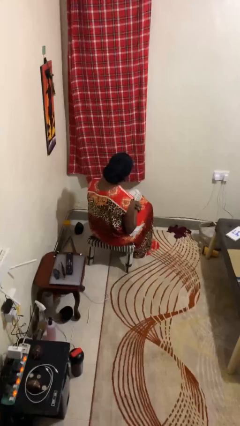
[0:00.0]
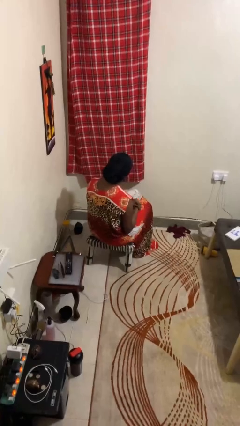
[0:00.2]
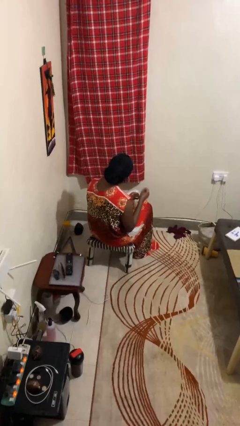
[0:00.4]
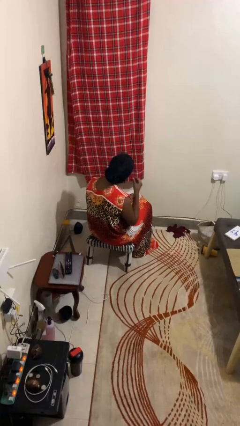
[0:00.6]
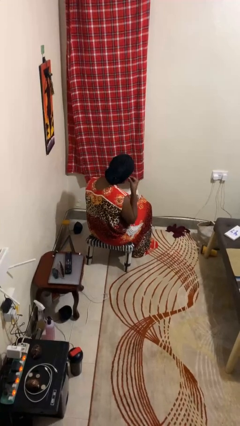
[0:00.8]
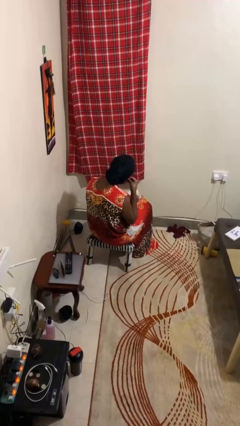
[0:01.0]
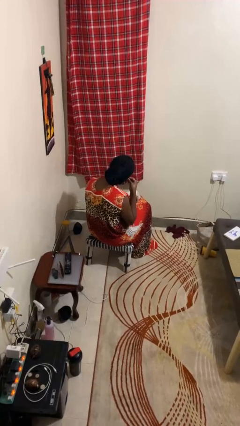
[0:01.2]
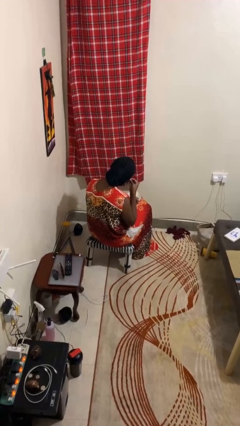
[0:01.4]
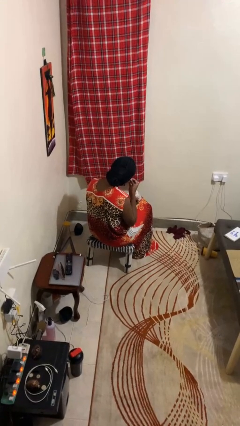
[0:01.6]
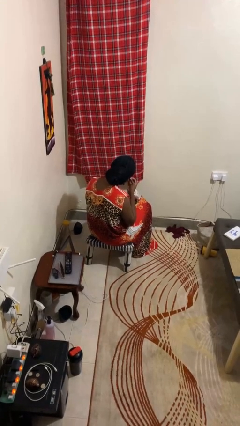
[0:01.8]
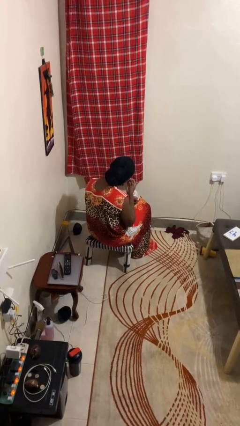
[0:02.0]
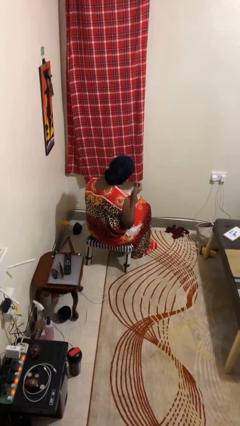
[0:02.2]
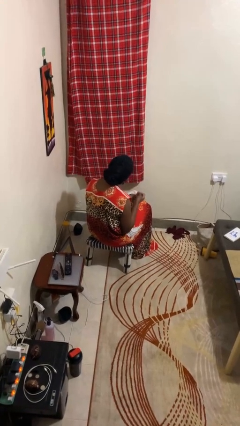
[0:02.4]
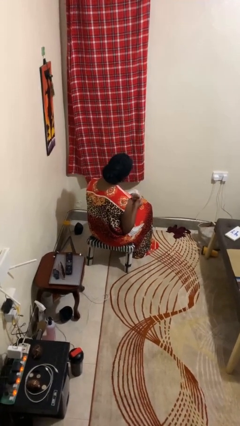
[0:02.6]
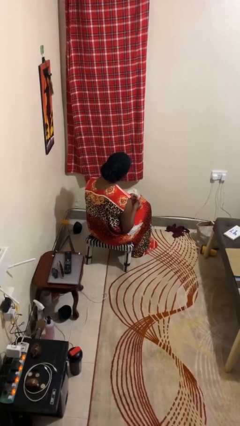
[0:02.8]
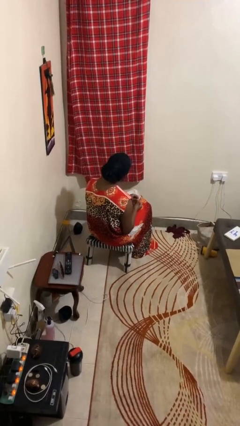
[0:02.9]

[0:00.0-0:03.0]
person takes off earrings

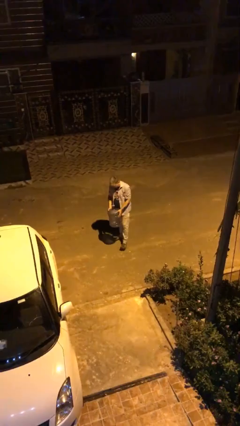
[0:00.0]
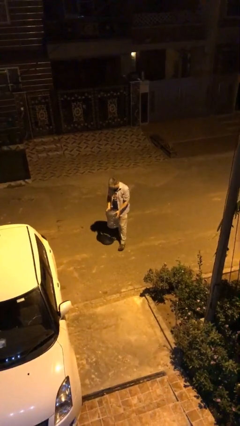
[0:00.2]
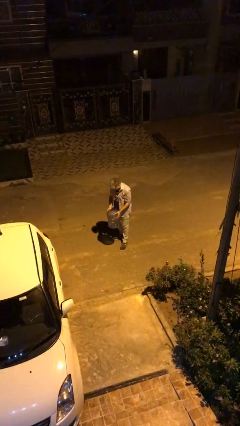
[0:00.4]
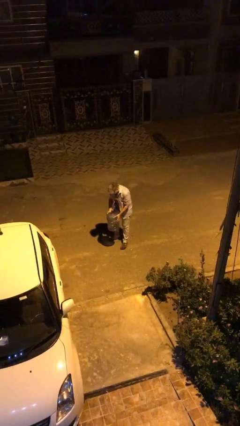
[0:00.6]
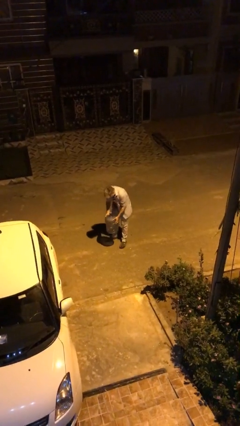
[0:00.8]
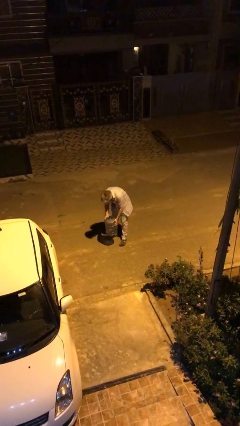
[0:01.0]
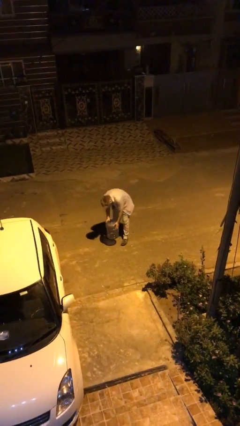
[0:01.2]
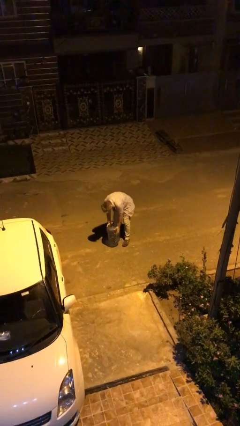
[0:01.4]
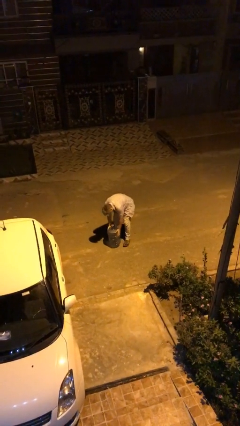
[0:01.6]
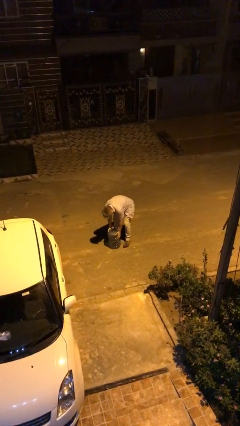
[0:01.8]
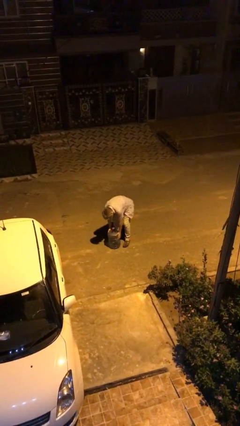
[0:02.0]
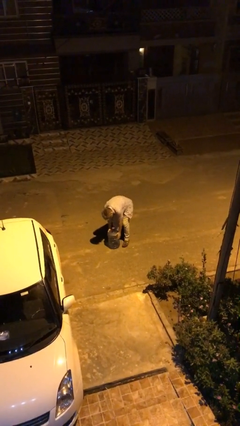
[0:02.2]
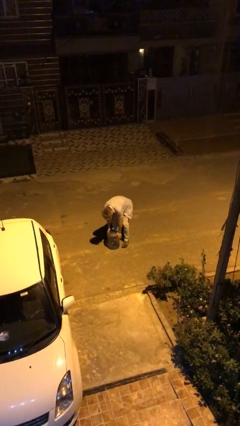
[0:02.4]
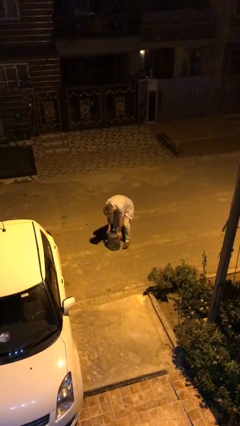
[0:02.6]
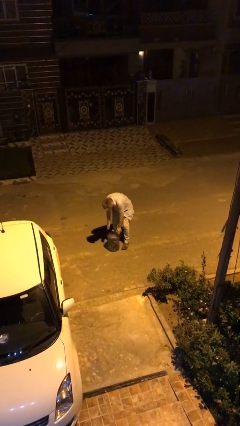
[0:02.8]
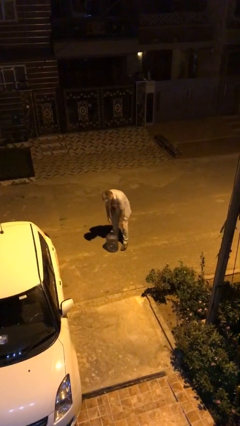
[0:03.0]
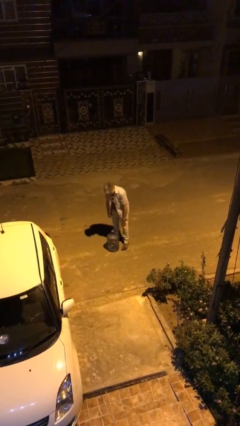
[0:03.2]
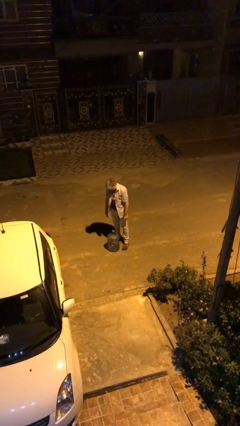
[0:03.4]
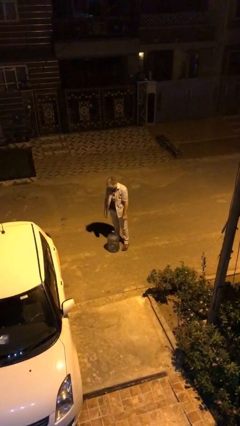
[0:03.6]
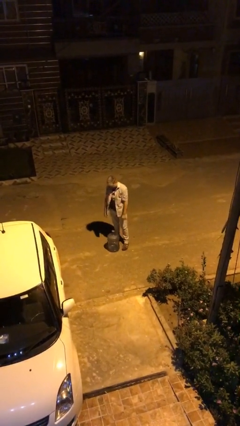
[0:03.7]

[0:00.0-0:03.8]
person puts down object on floor

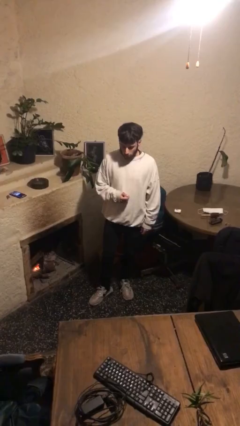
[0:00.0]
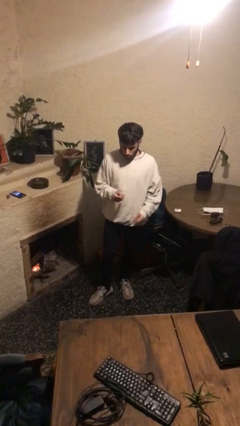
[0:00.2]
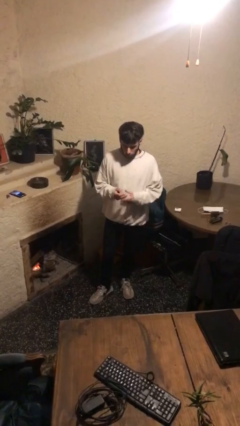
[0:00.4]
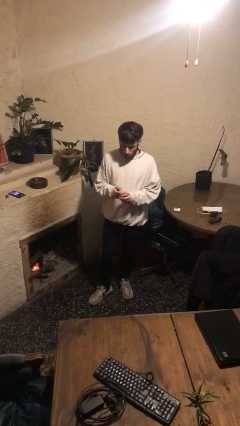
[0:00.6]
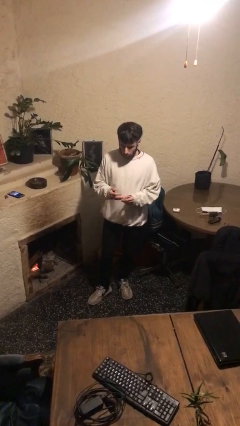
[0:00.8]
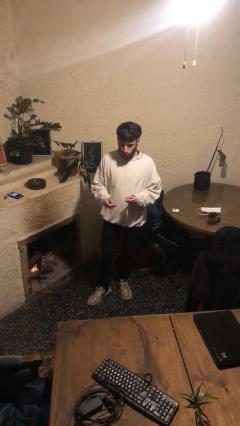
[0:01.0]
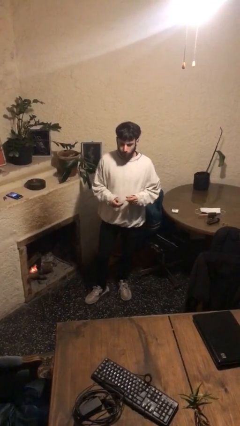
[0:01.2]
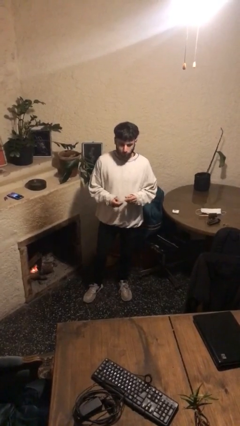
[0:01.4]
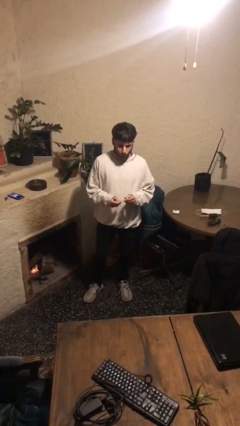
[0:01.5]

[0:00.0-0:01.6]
person takes off ring

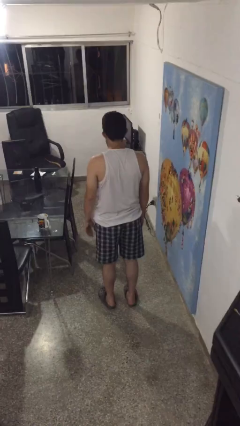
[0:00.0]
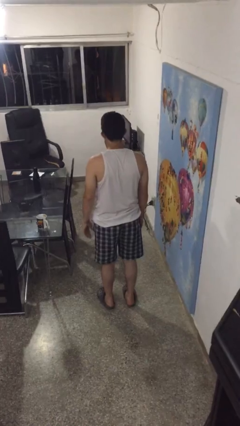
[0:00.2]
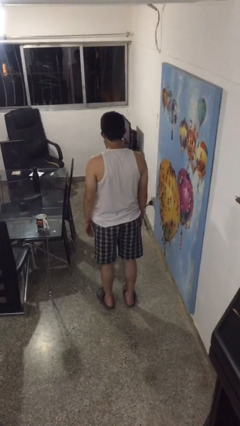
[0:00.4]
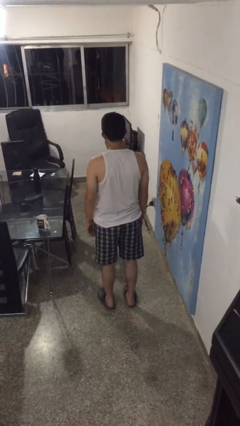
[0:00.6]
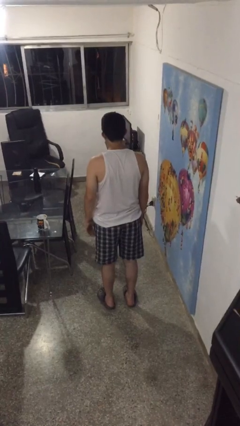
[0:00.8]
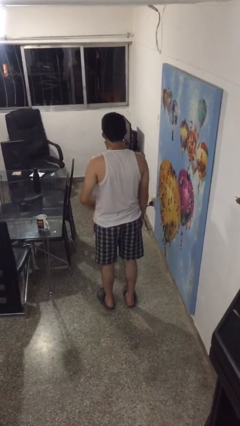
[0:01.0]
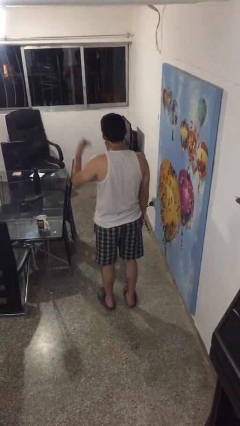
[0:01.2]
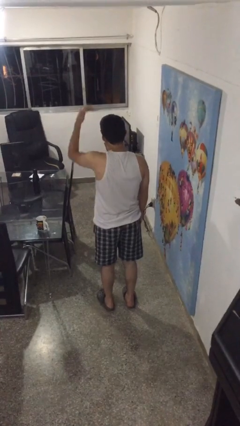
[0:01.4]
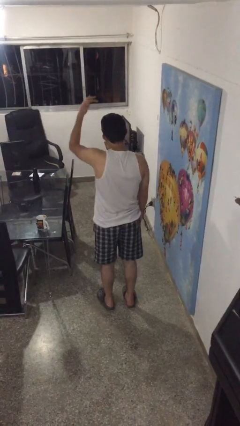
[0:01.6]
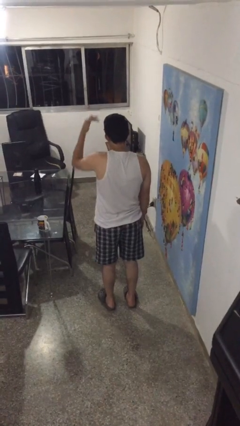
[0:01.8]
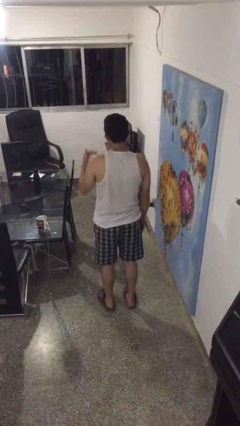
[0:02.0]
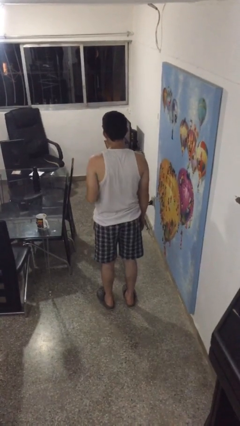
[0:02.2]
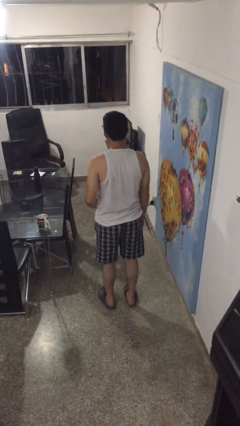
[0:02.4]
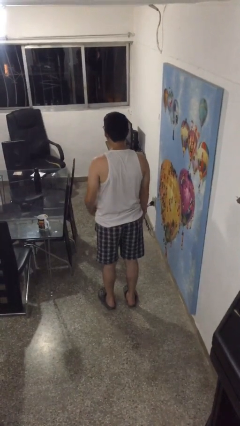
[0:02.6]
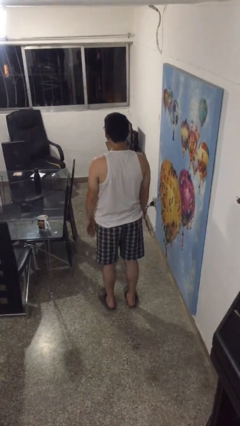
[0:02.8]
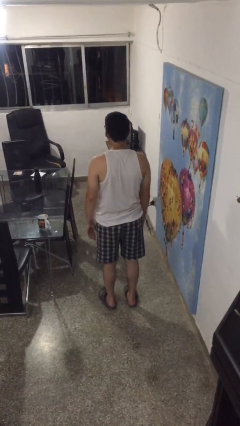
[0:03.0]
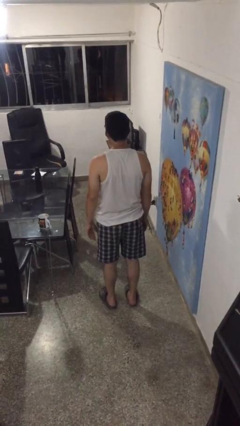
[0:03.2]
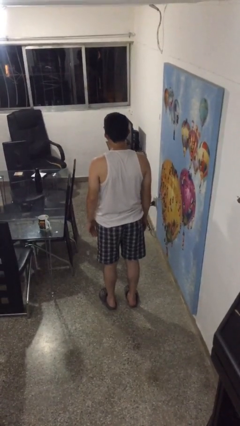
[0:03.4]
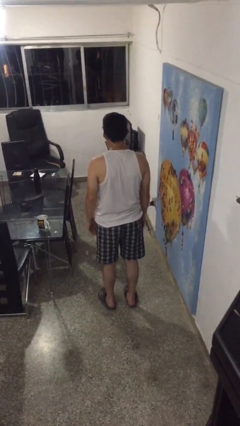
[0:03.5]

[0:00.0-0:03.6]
person gestures swipe down

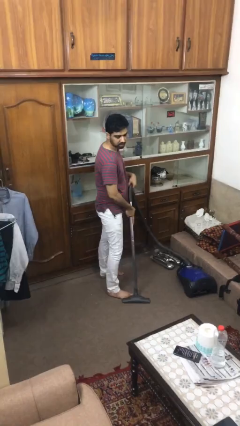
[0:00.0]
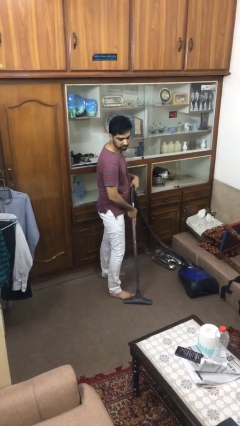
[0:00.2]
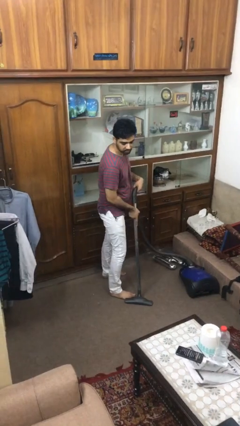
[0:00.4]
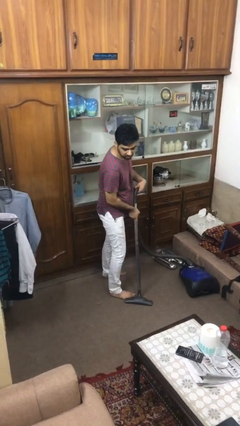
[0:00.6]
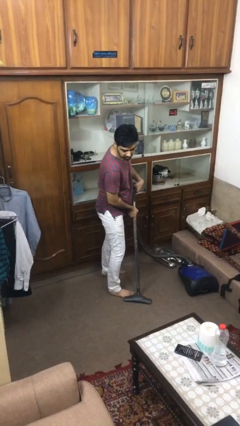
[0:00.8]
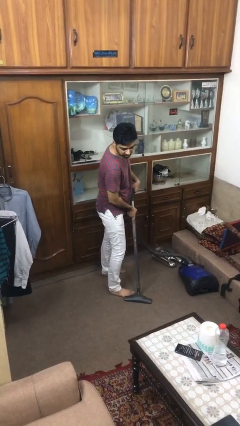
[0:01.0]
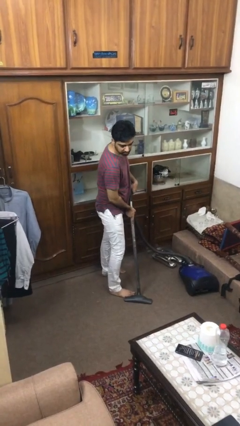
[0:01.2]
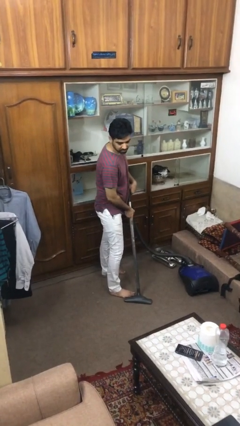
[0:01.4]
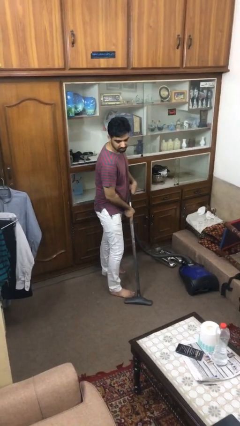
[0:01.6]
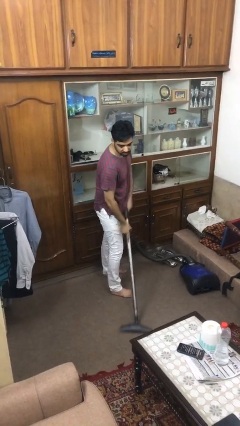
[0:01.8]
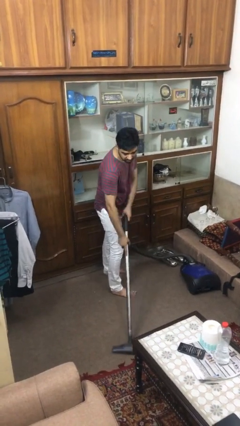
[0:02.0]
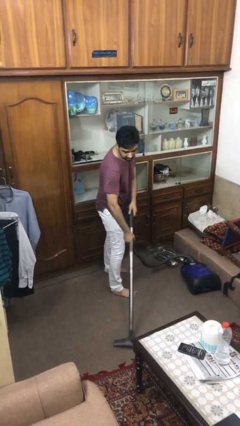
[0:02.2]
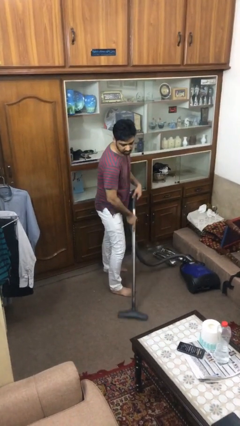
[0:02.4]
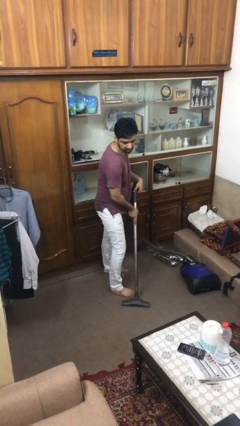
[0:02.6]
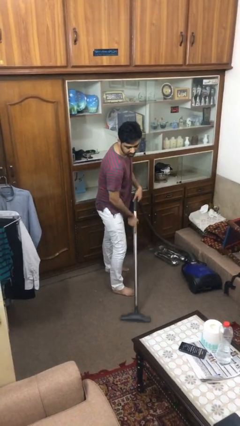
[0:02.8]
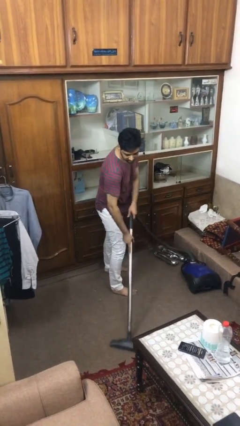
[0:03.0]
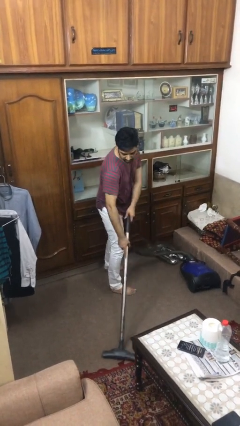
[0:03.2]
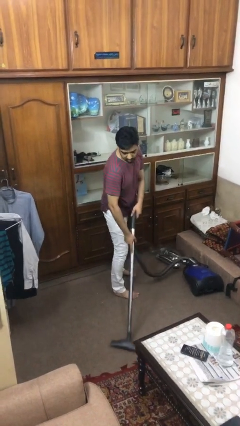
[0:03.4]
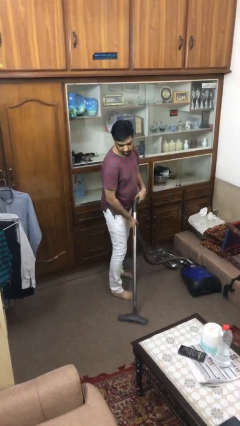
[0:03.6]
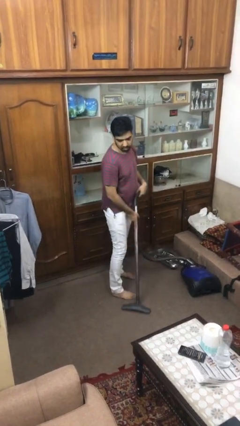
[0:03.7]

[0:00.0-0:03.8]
person vacuums carpet

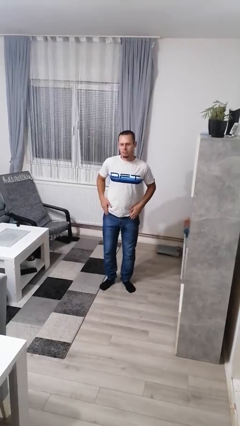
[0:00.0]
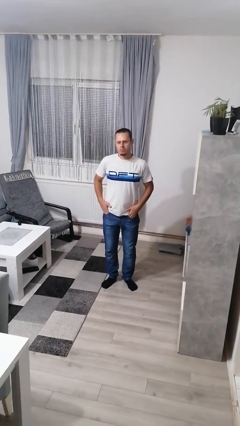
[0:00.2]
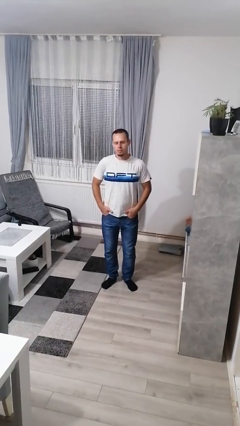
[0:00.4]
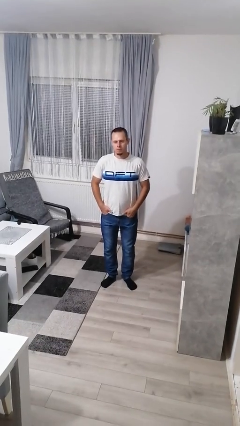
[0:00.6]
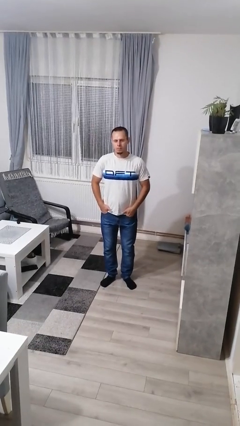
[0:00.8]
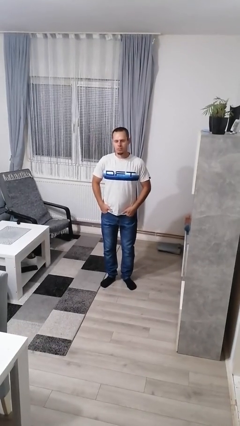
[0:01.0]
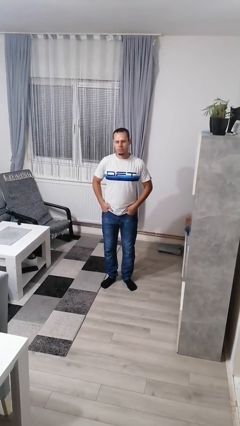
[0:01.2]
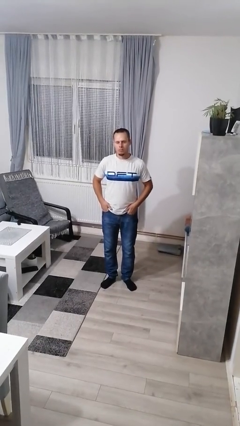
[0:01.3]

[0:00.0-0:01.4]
person puts hands in back pockets
